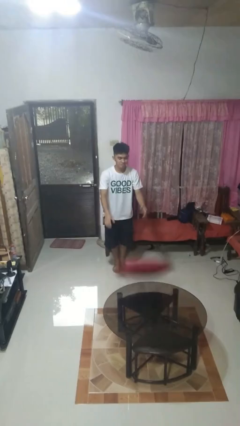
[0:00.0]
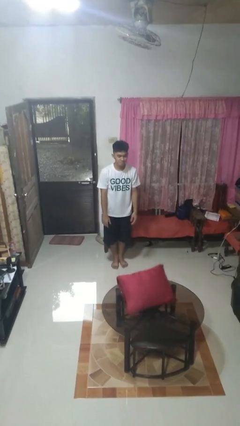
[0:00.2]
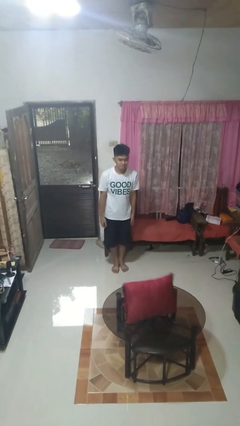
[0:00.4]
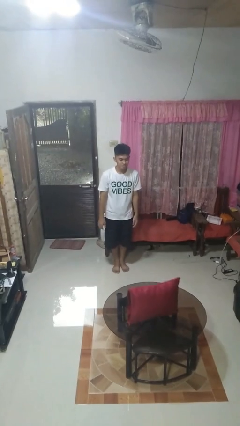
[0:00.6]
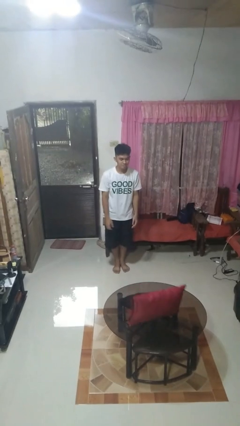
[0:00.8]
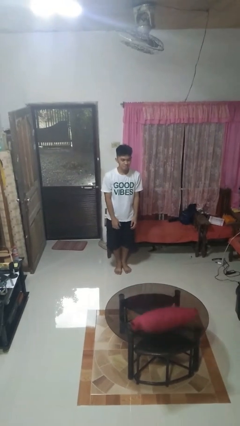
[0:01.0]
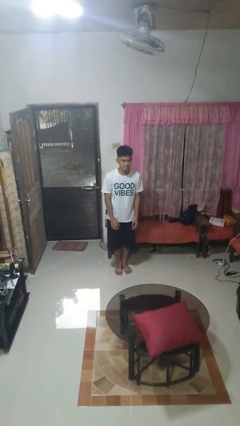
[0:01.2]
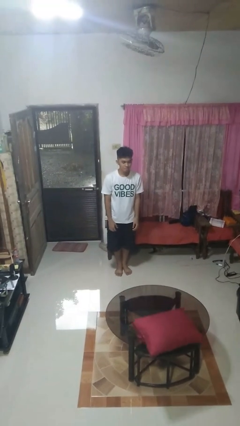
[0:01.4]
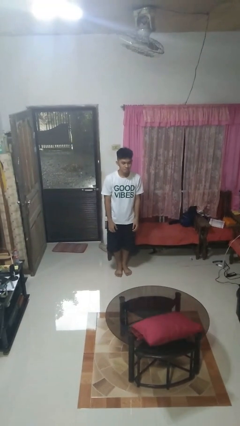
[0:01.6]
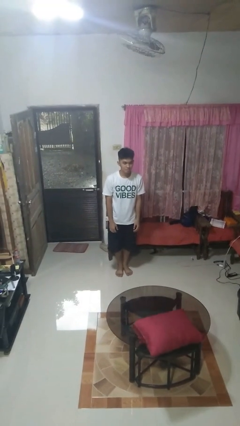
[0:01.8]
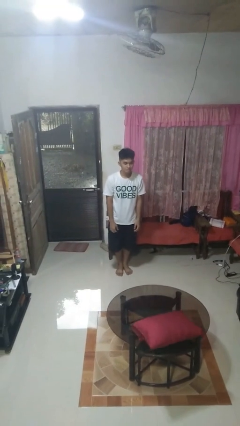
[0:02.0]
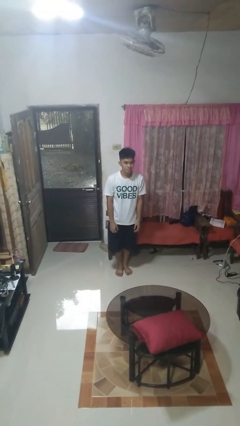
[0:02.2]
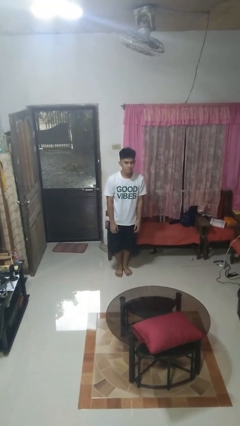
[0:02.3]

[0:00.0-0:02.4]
person throws object on table

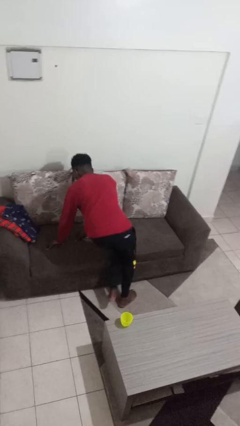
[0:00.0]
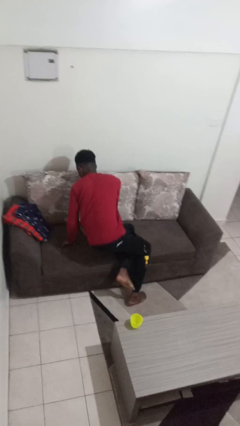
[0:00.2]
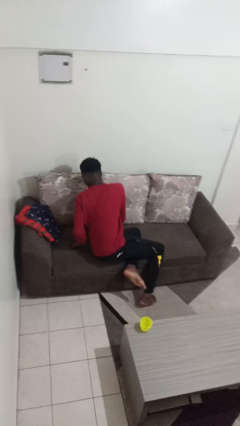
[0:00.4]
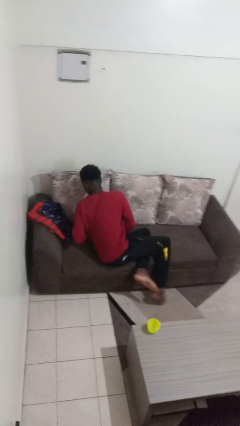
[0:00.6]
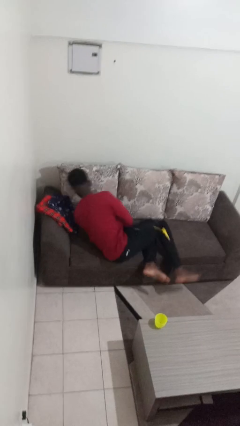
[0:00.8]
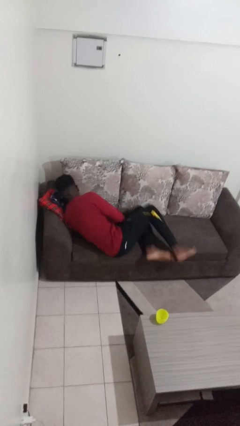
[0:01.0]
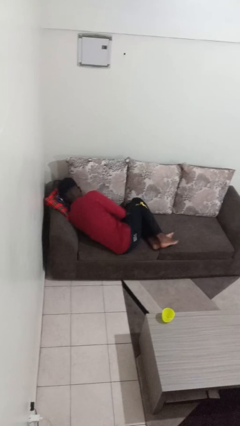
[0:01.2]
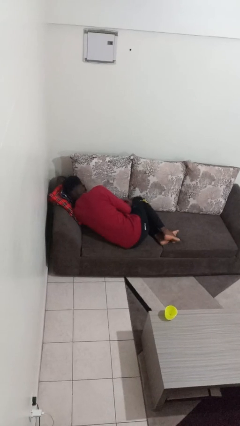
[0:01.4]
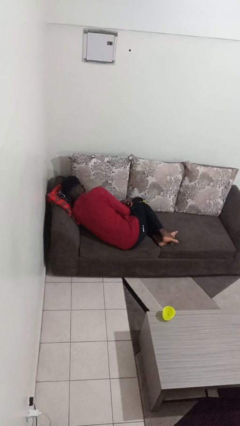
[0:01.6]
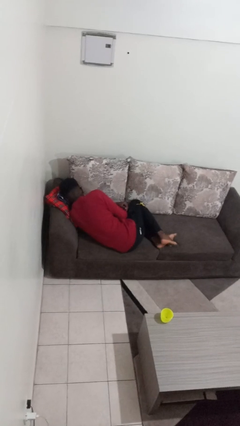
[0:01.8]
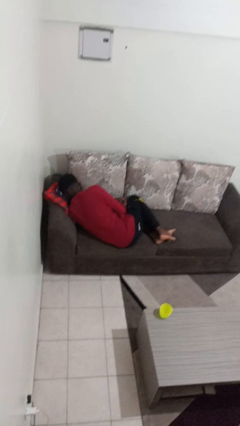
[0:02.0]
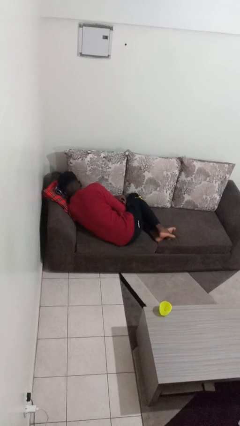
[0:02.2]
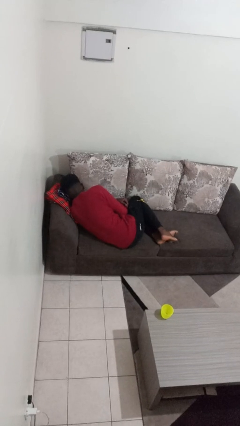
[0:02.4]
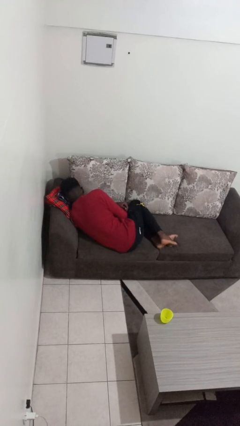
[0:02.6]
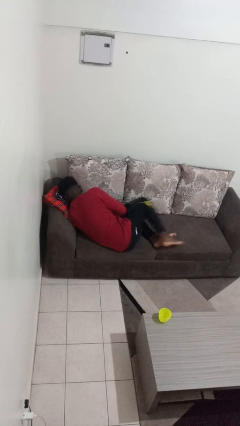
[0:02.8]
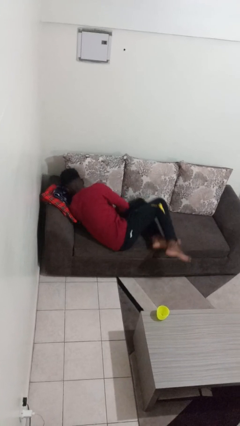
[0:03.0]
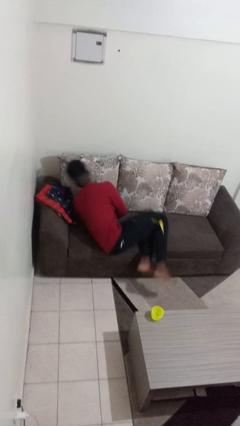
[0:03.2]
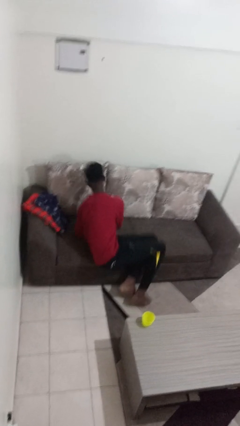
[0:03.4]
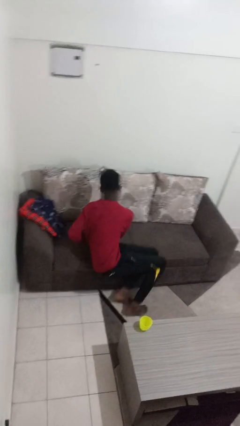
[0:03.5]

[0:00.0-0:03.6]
person lies down on couch

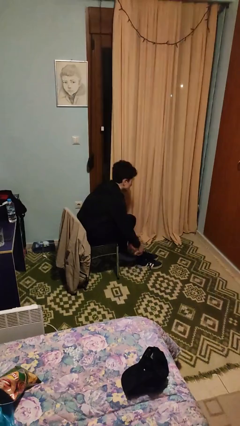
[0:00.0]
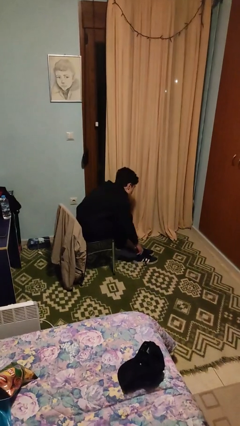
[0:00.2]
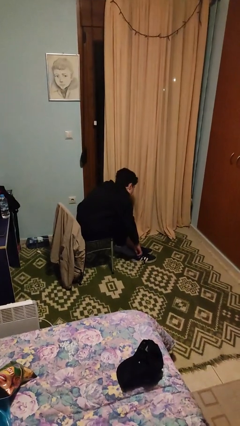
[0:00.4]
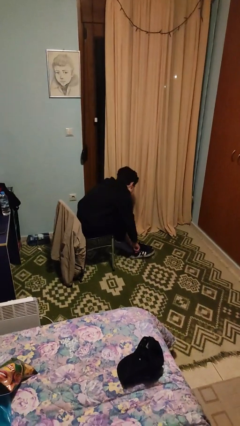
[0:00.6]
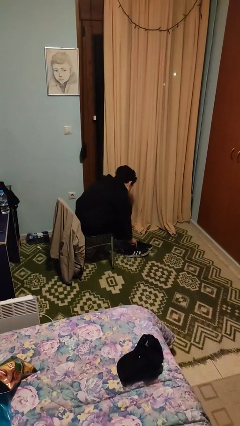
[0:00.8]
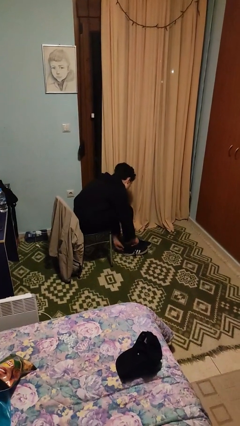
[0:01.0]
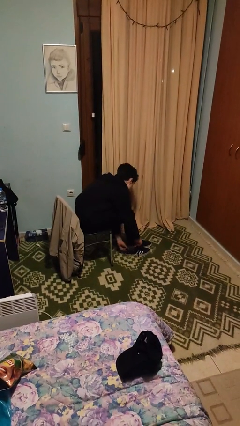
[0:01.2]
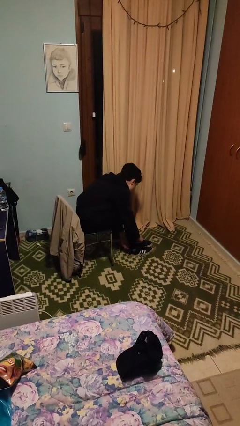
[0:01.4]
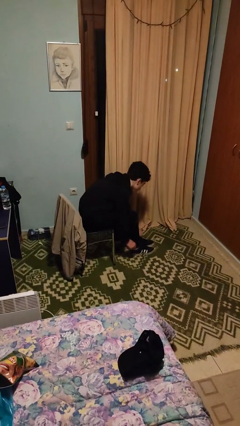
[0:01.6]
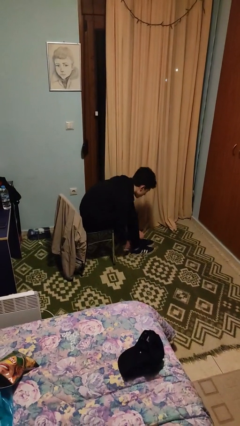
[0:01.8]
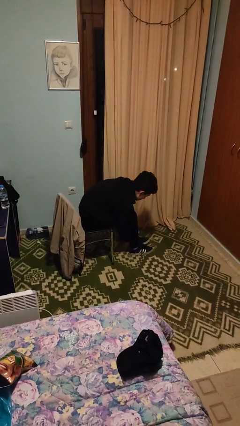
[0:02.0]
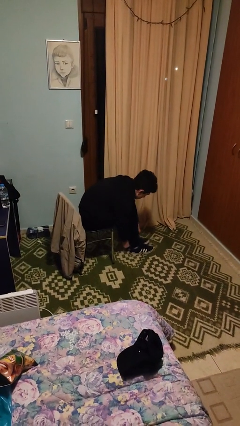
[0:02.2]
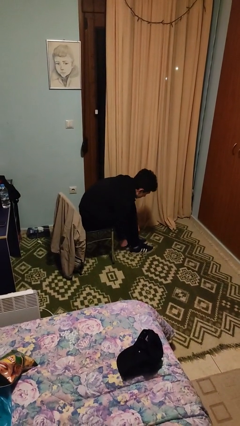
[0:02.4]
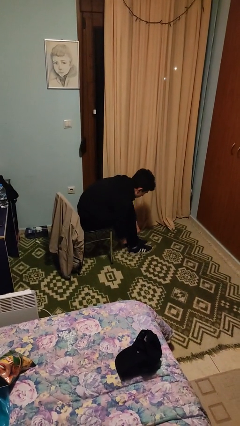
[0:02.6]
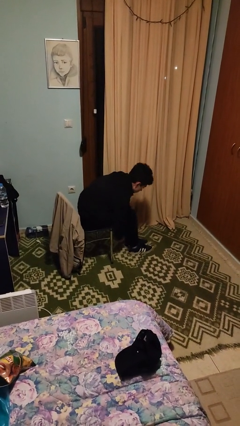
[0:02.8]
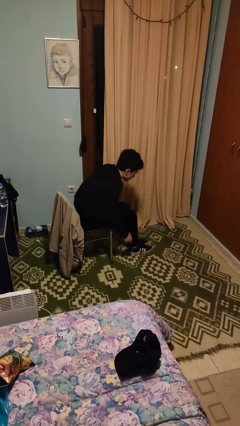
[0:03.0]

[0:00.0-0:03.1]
person puts on shoes

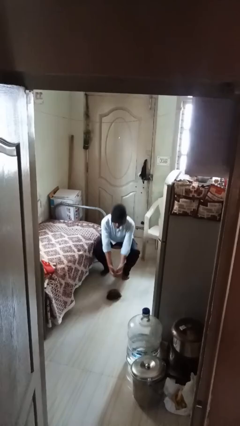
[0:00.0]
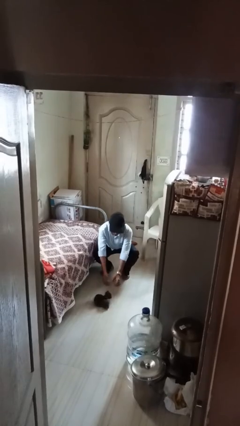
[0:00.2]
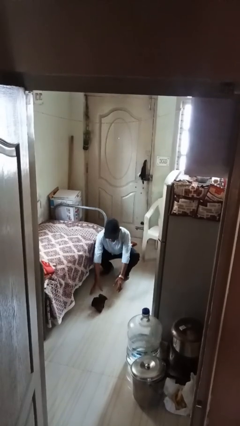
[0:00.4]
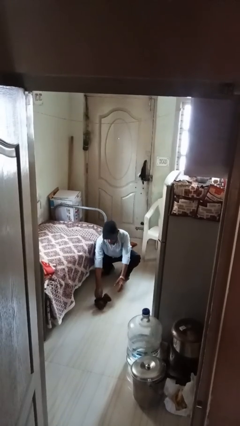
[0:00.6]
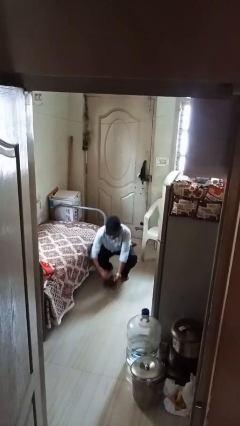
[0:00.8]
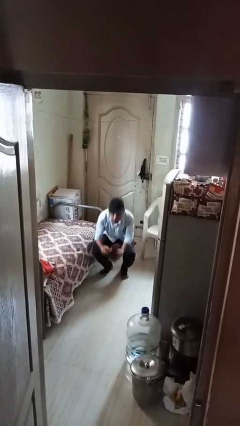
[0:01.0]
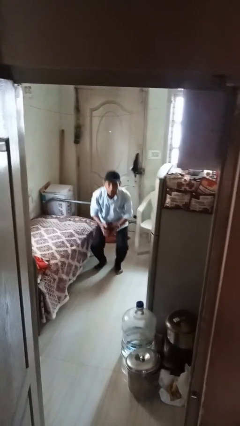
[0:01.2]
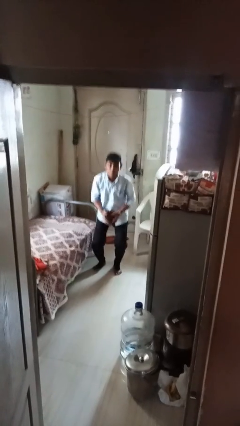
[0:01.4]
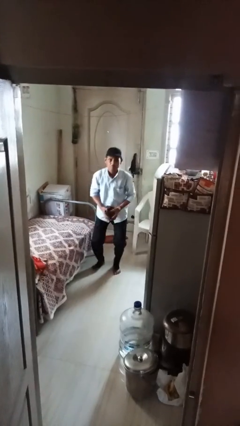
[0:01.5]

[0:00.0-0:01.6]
person catches dropped object

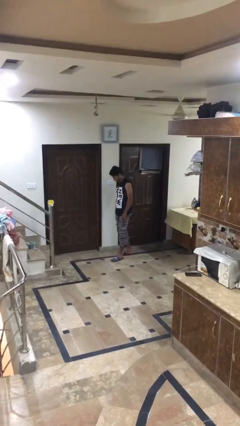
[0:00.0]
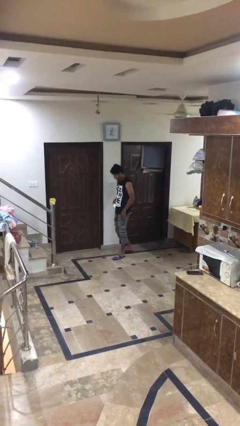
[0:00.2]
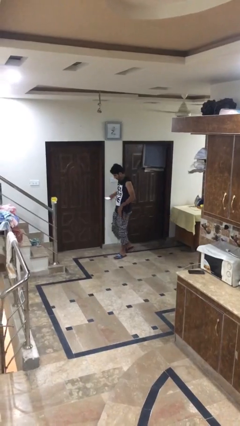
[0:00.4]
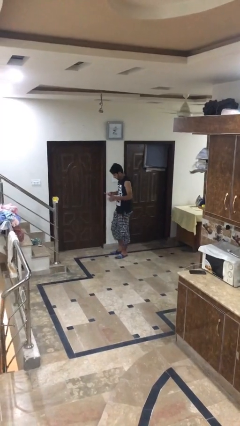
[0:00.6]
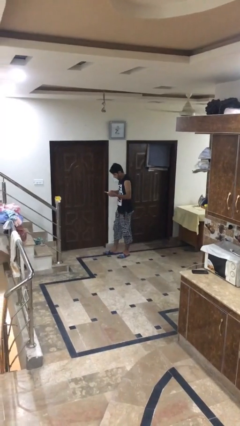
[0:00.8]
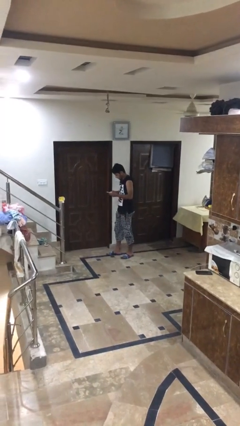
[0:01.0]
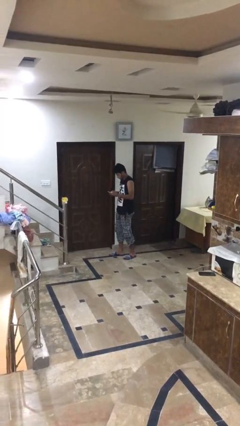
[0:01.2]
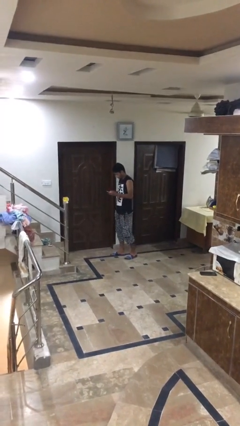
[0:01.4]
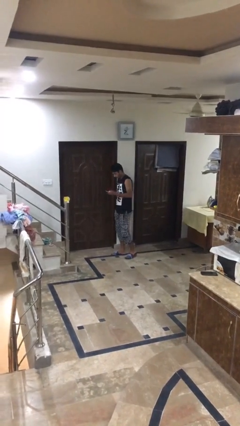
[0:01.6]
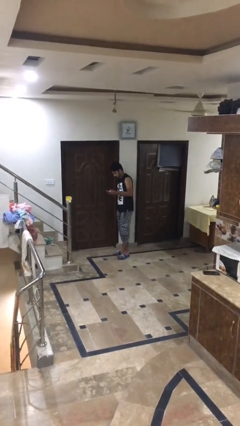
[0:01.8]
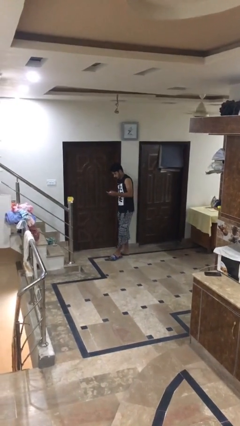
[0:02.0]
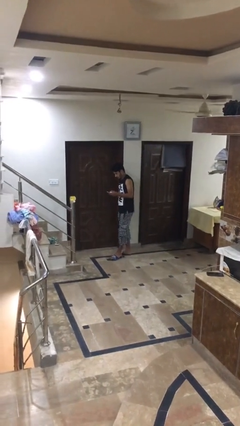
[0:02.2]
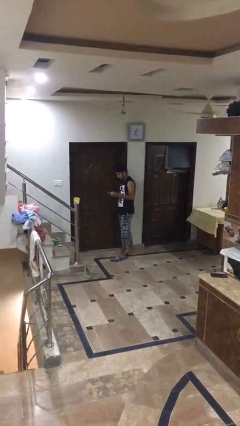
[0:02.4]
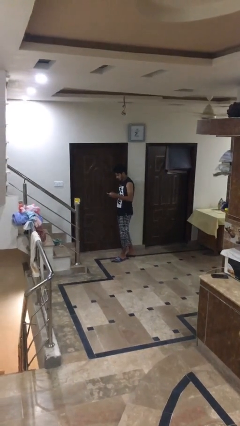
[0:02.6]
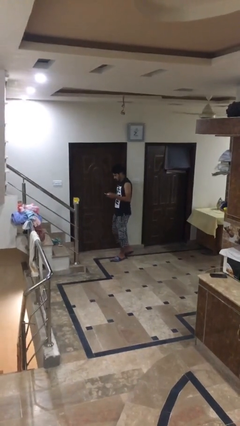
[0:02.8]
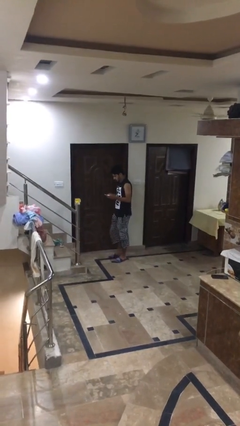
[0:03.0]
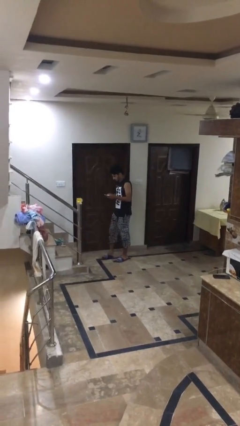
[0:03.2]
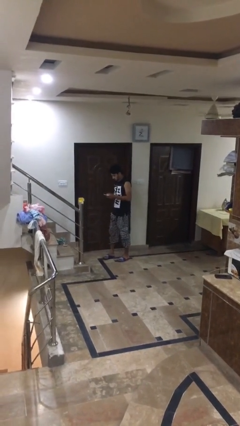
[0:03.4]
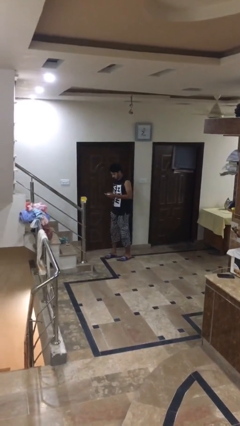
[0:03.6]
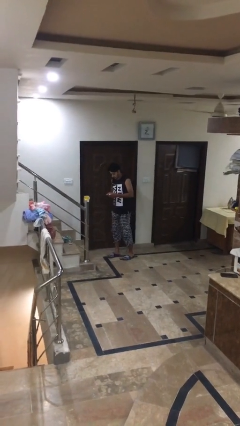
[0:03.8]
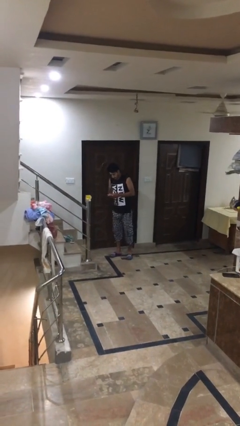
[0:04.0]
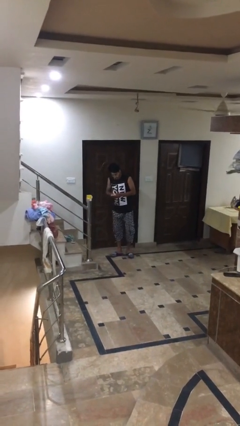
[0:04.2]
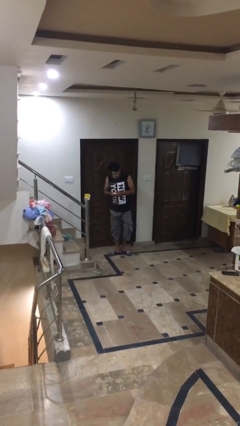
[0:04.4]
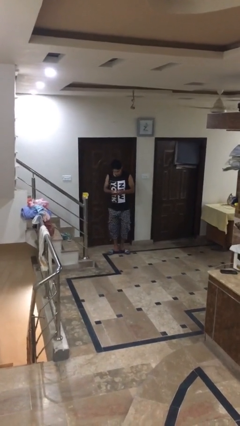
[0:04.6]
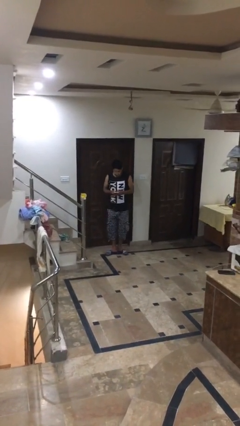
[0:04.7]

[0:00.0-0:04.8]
person texts on phone

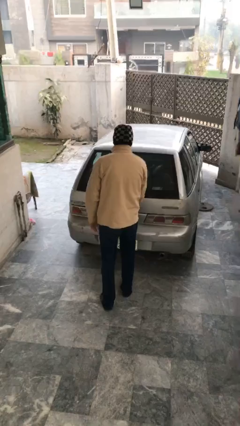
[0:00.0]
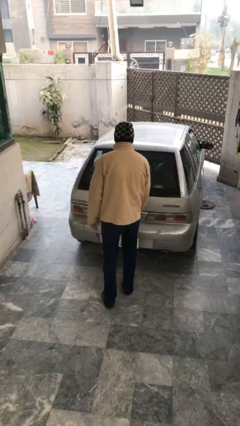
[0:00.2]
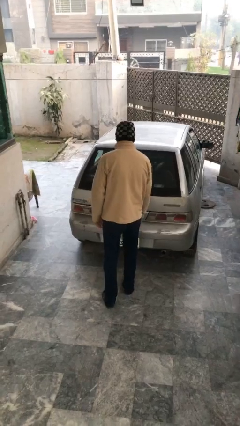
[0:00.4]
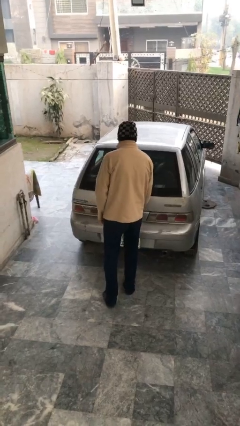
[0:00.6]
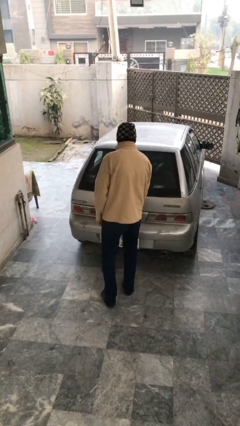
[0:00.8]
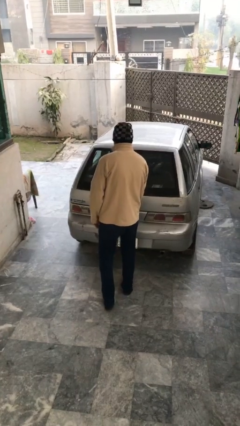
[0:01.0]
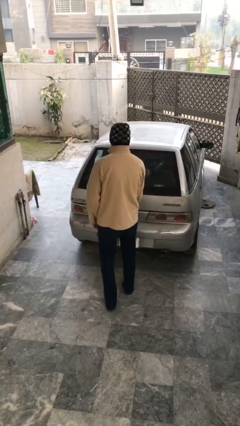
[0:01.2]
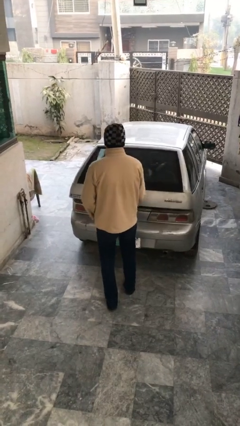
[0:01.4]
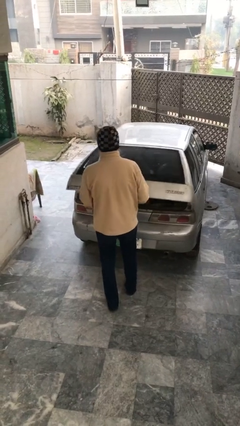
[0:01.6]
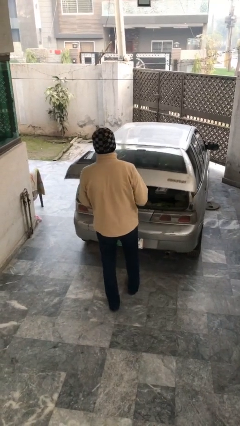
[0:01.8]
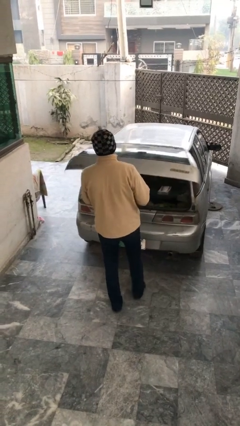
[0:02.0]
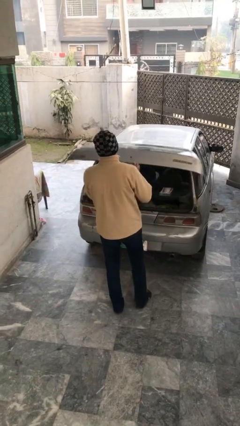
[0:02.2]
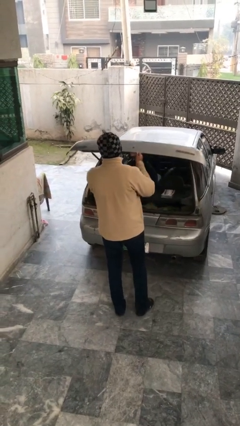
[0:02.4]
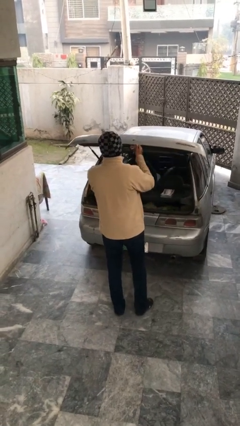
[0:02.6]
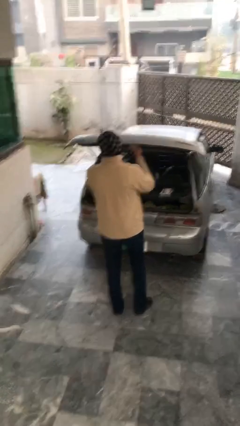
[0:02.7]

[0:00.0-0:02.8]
person opens car trunk
